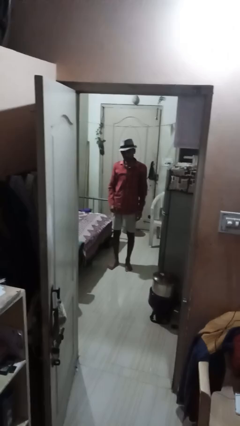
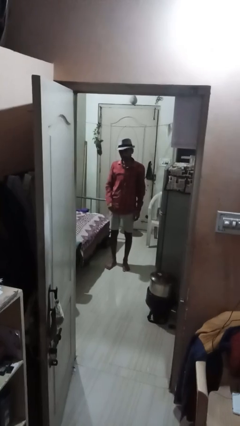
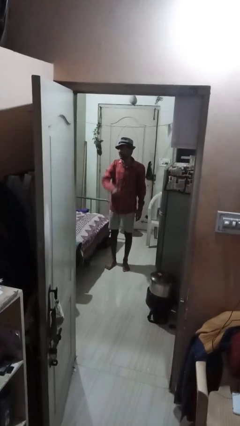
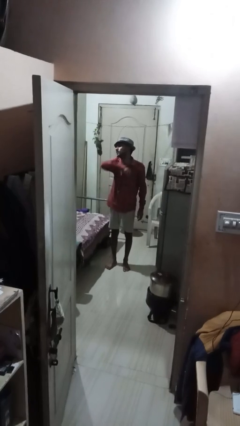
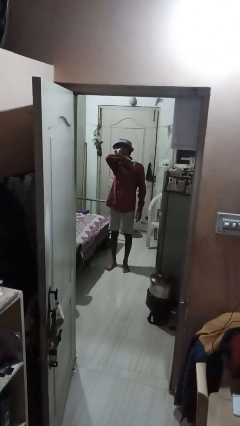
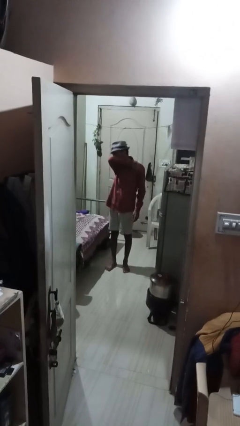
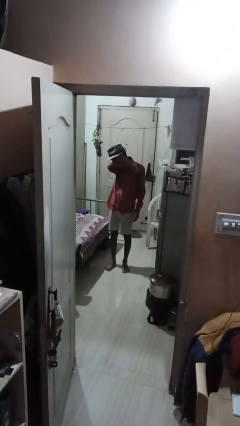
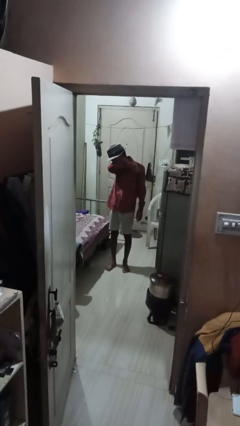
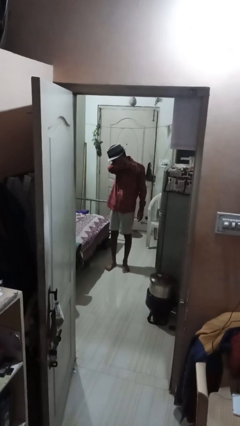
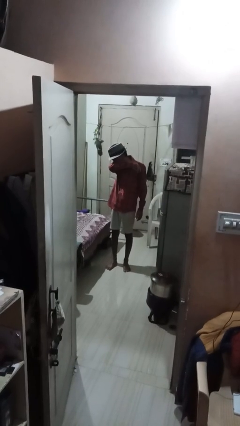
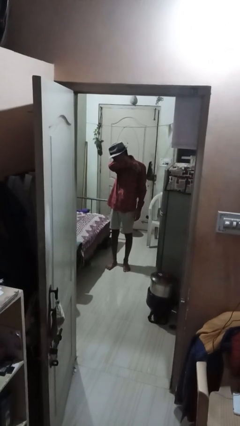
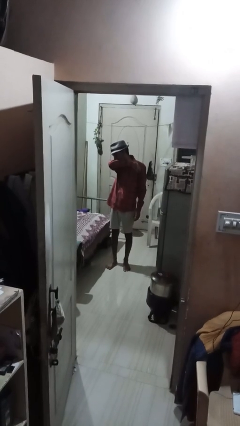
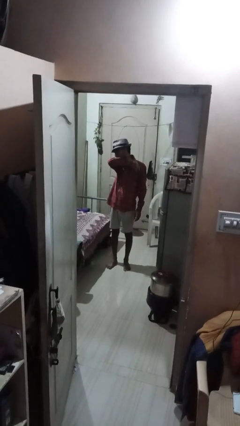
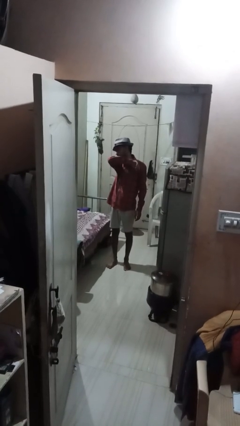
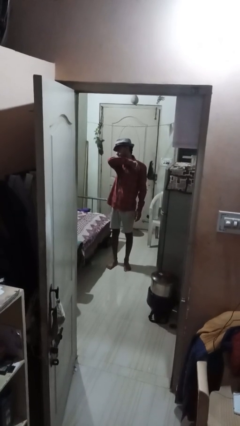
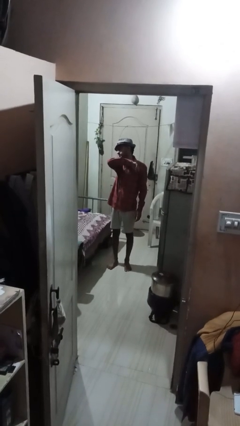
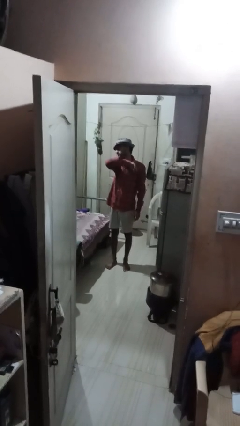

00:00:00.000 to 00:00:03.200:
person sneezes into arm

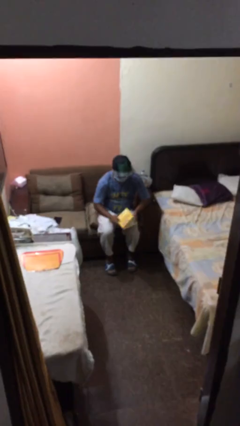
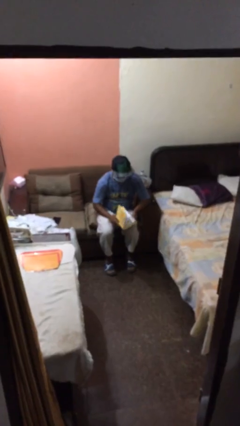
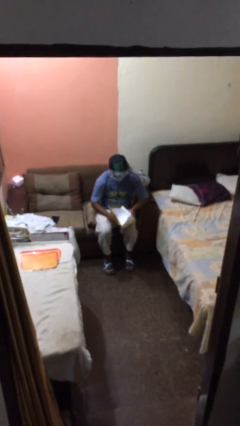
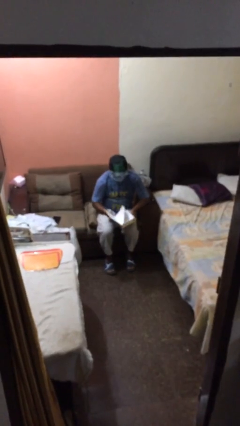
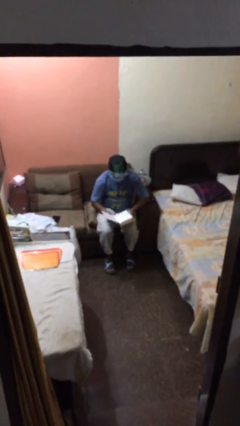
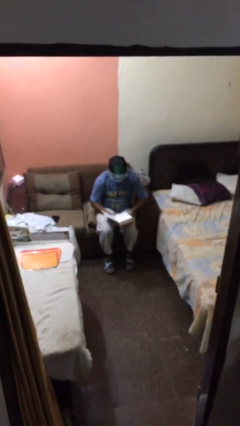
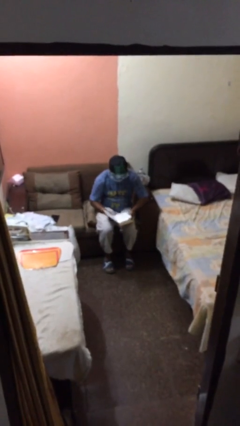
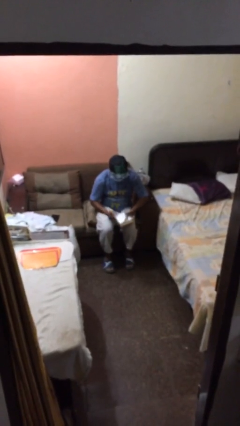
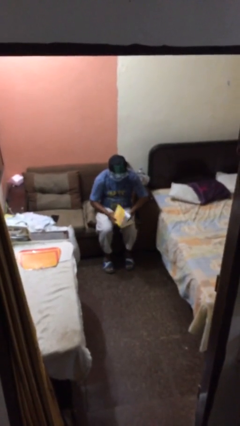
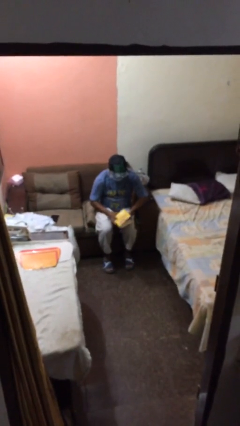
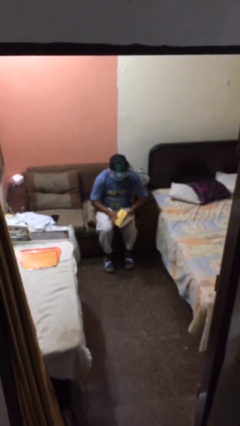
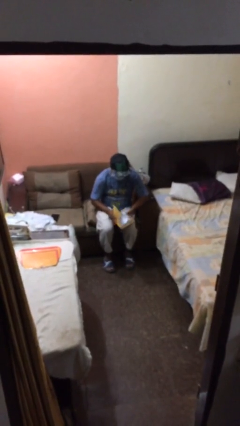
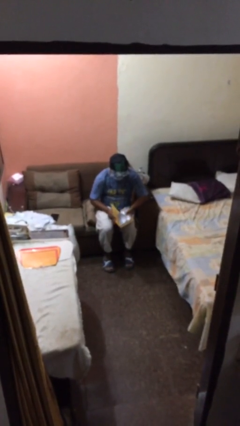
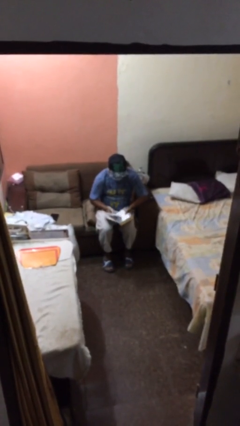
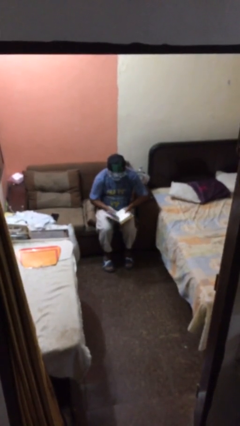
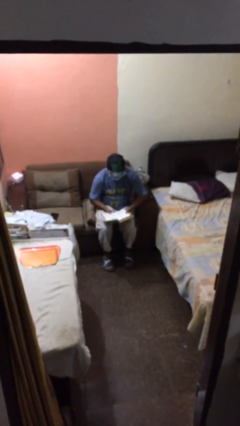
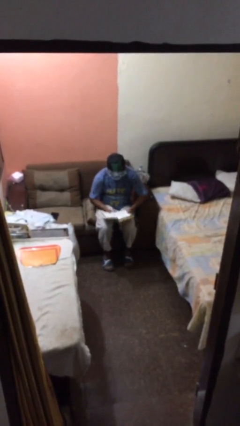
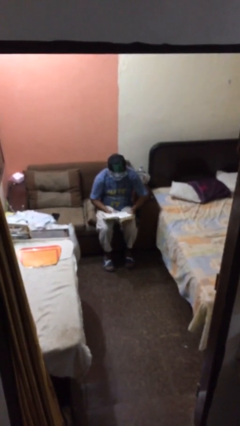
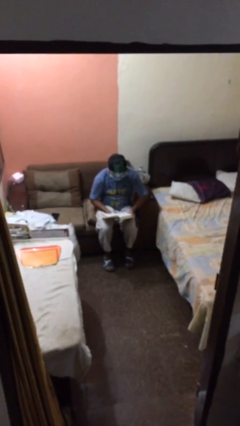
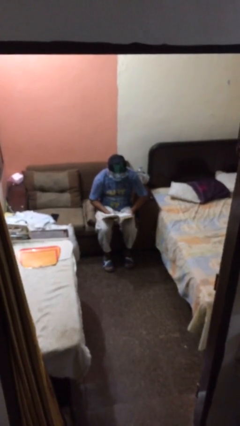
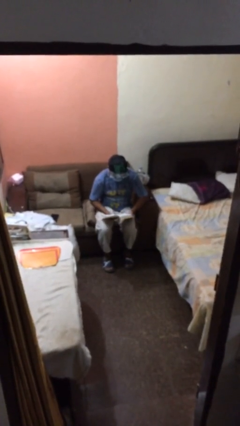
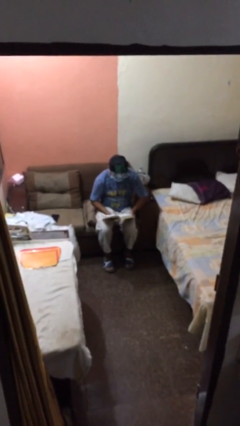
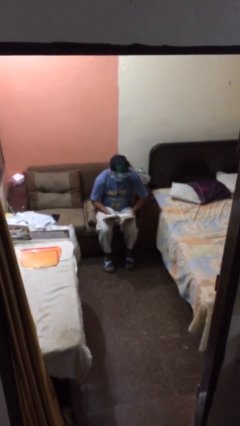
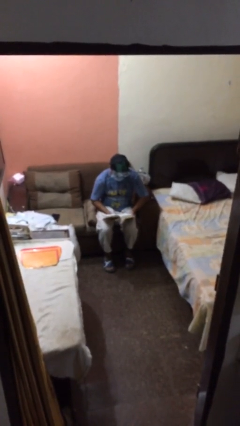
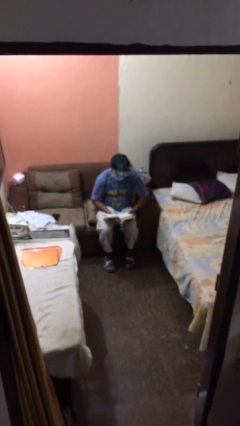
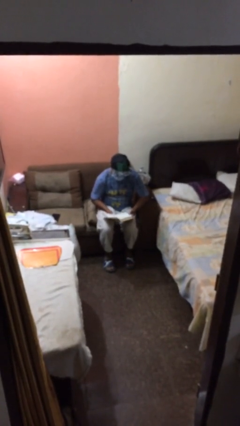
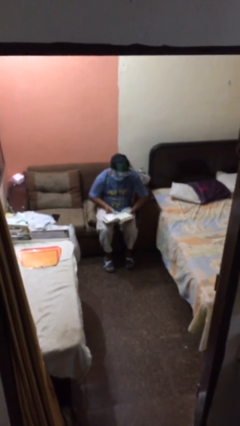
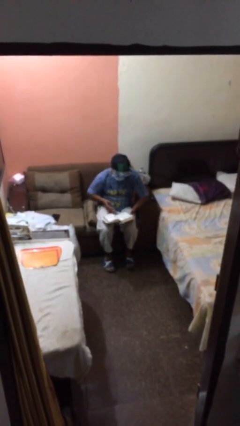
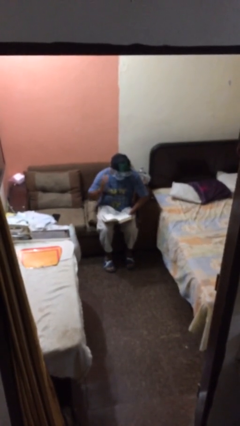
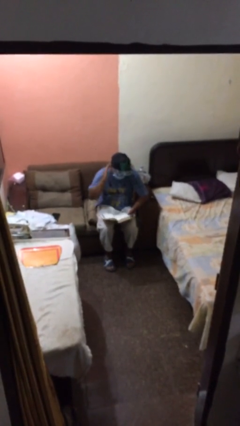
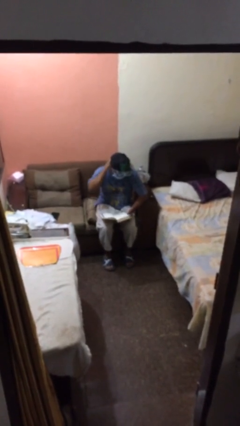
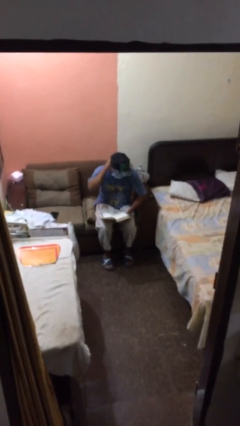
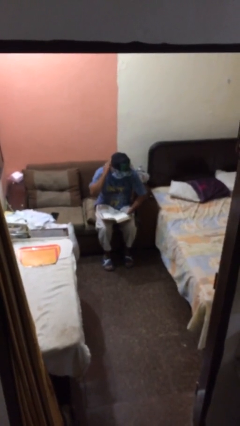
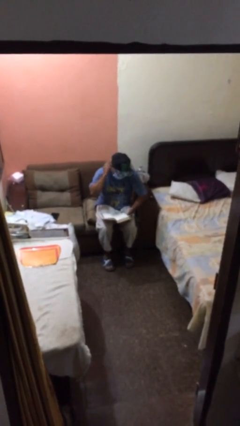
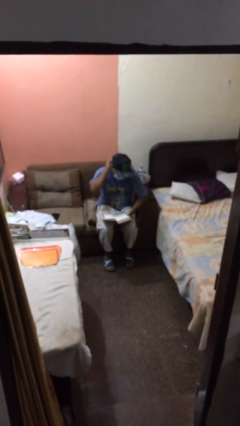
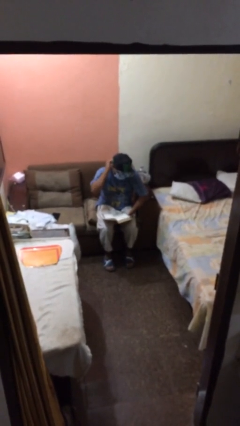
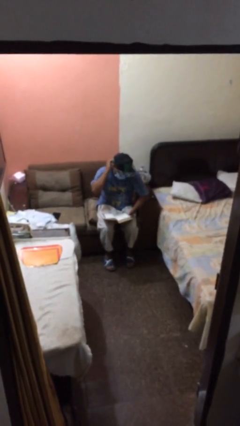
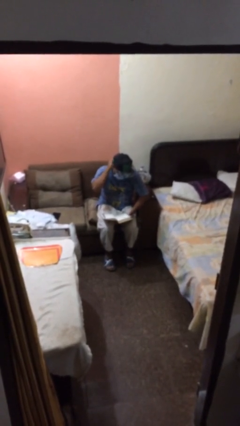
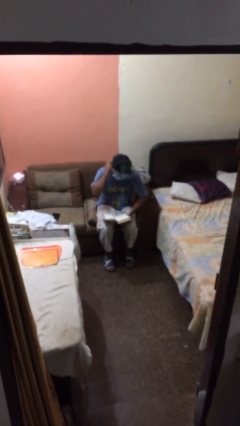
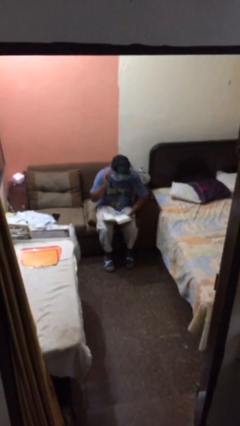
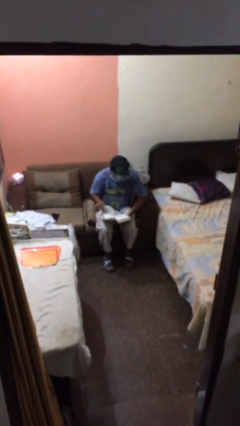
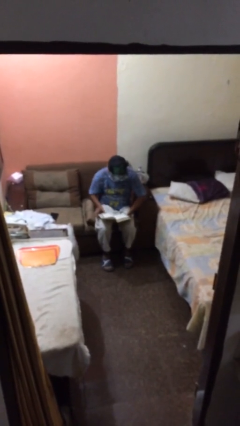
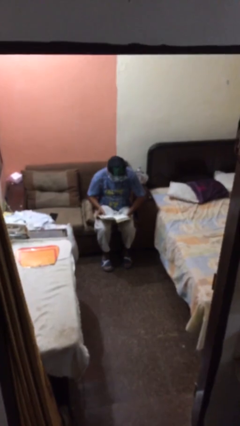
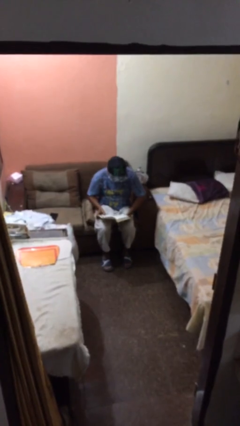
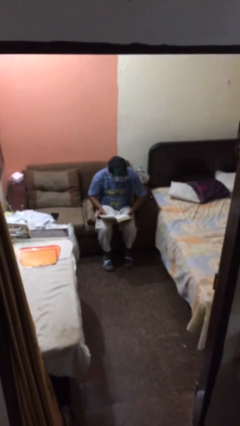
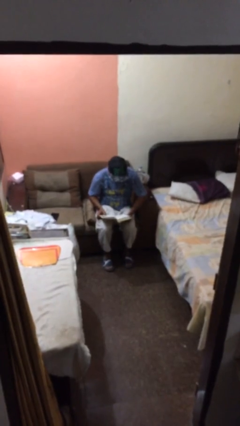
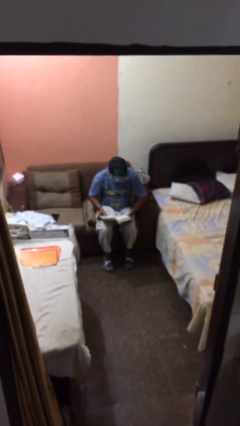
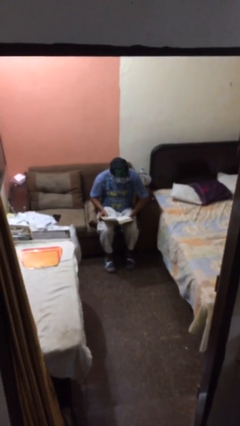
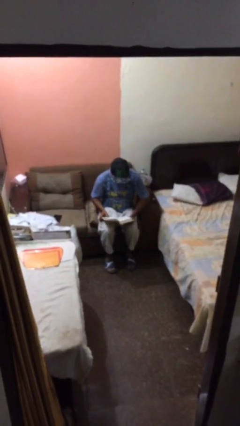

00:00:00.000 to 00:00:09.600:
person reads document

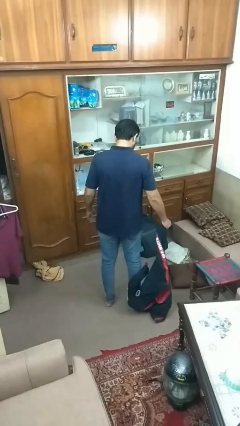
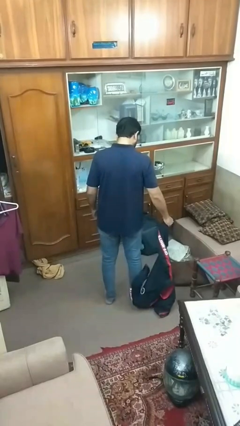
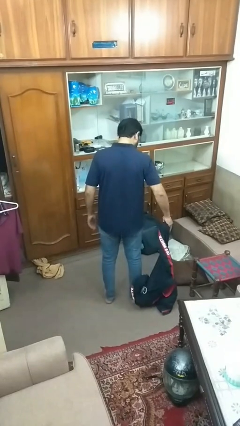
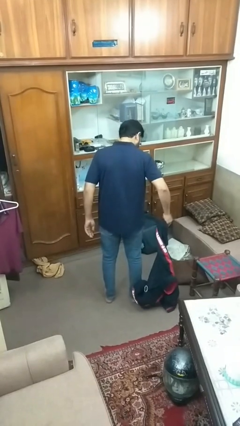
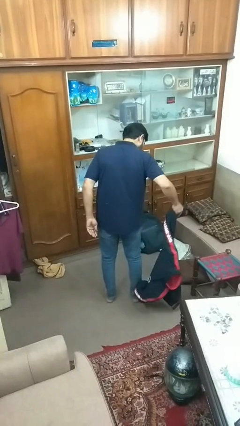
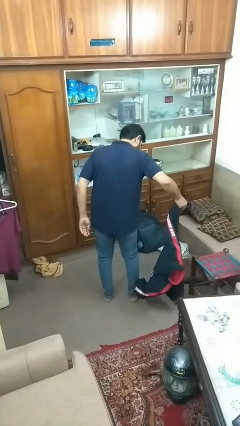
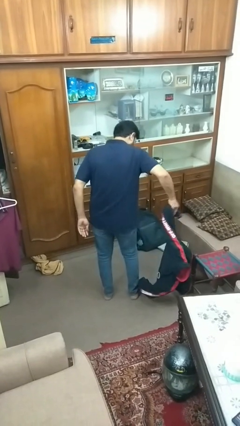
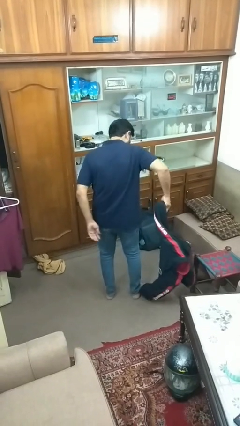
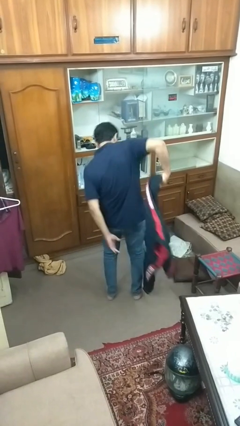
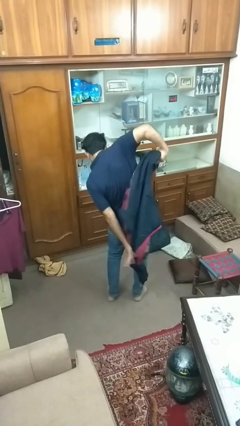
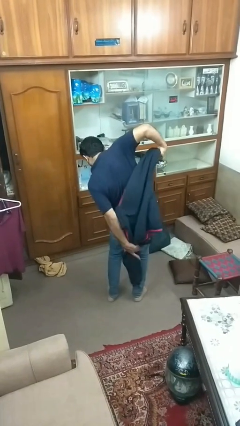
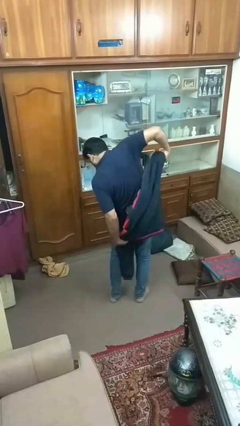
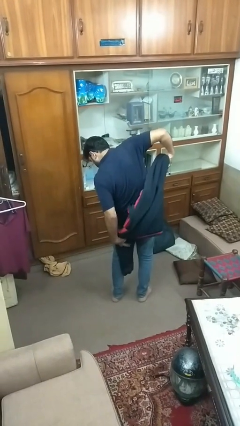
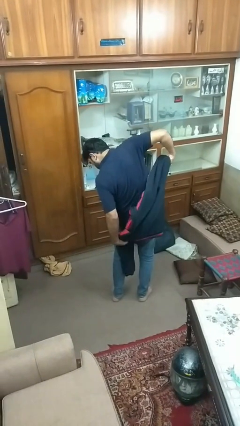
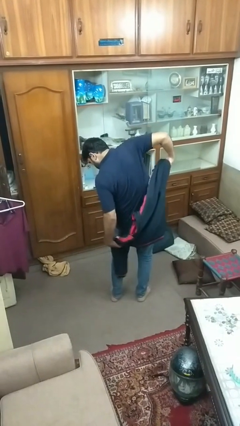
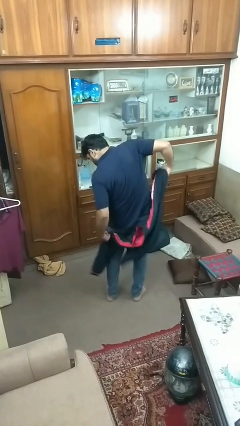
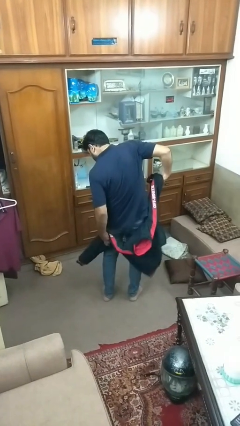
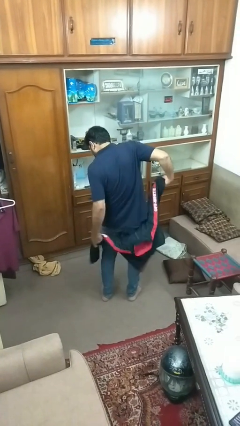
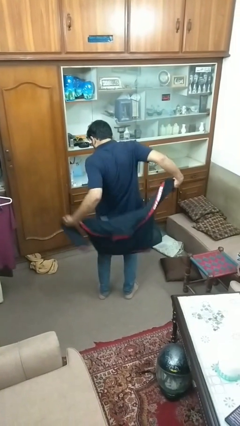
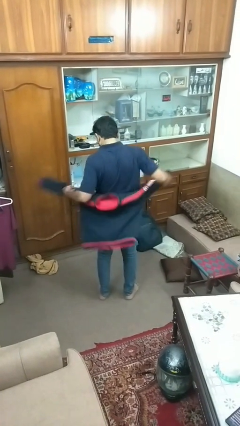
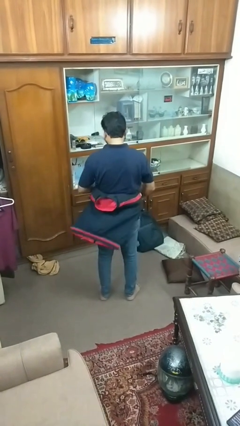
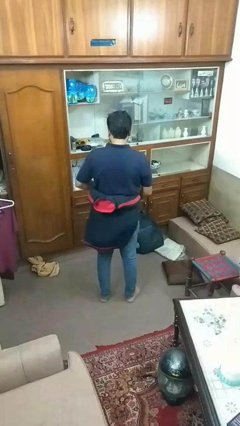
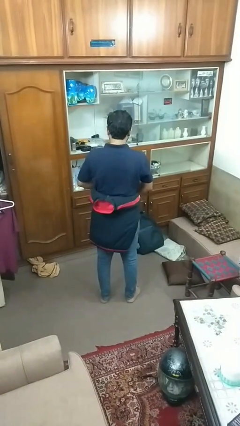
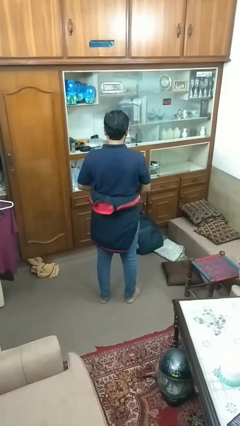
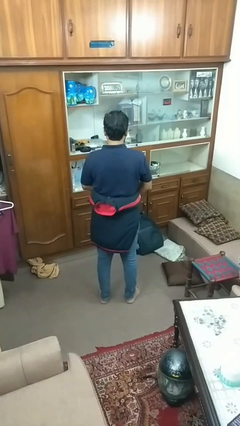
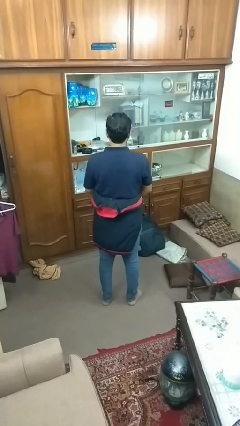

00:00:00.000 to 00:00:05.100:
person ties jacket around waist
